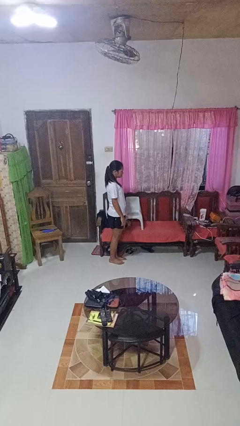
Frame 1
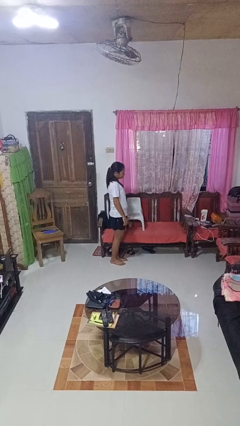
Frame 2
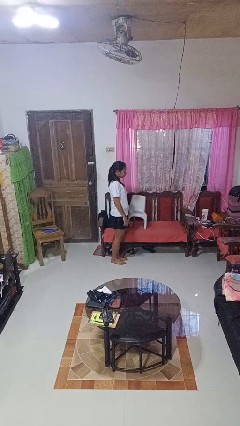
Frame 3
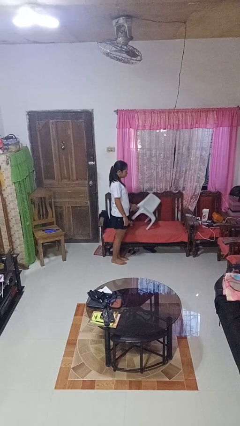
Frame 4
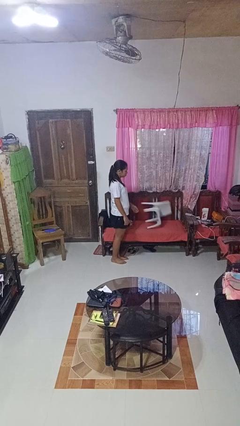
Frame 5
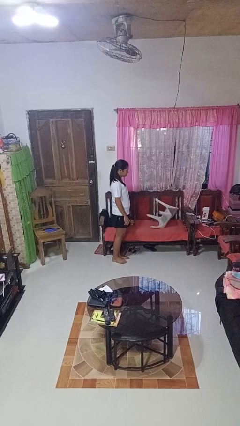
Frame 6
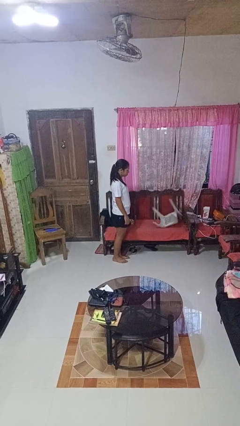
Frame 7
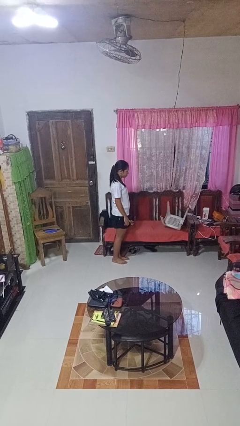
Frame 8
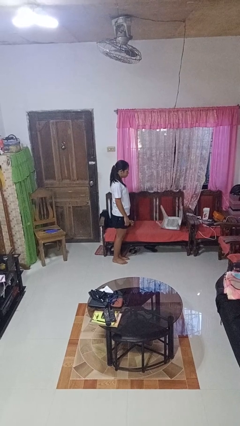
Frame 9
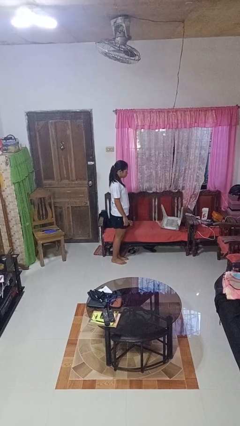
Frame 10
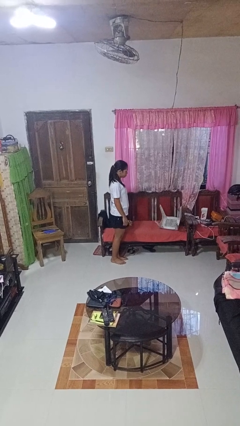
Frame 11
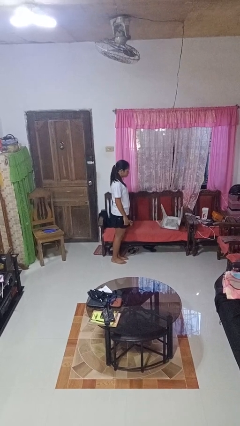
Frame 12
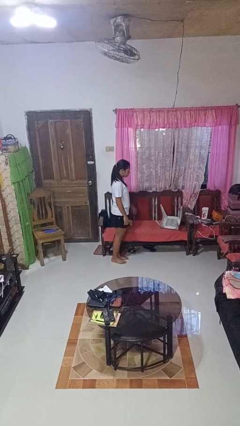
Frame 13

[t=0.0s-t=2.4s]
person knocks over furniture

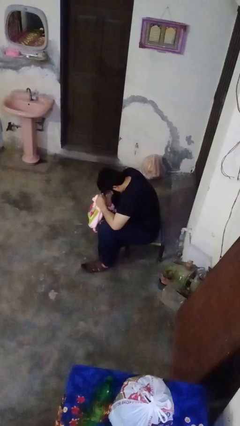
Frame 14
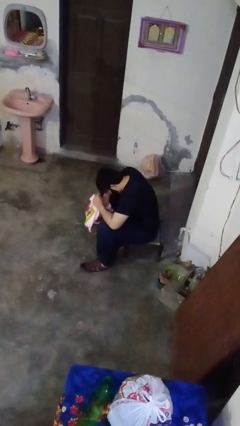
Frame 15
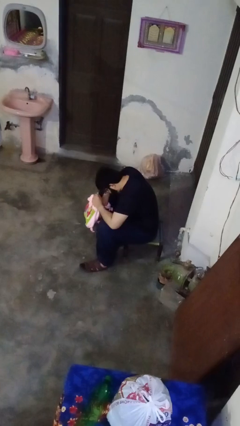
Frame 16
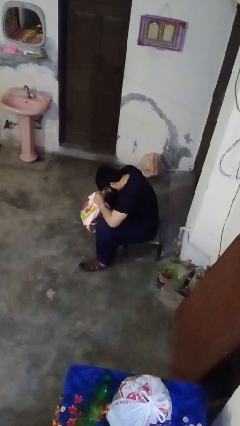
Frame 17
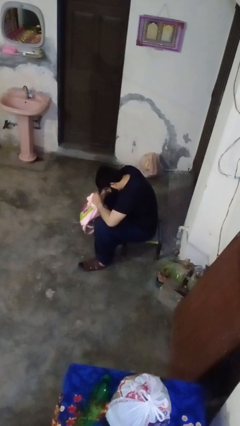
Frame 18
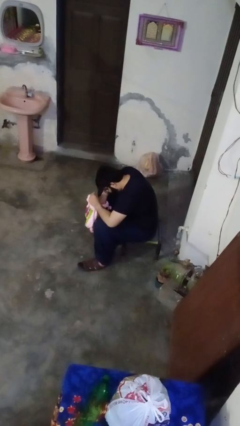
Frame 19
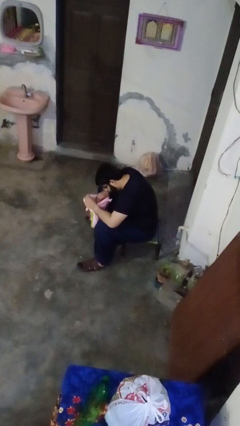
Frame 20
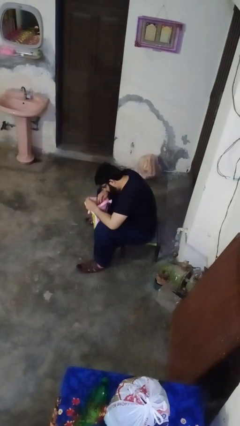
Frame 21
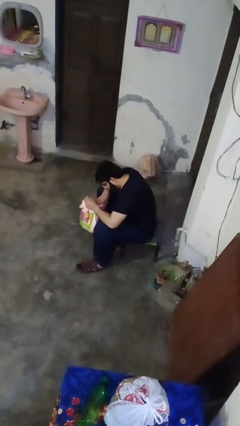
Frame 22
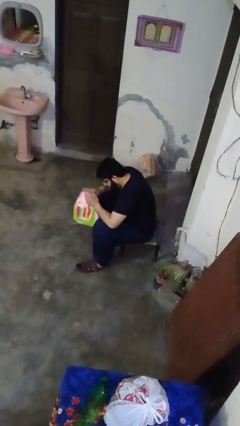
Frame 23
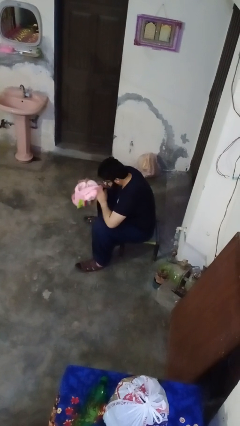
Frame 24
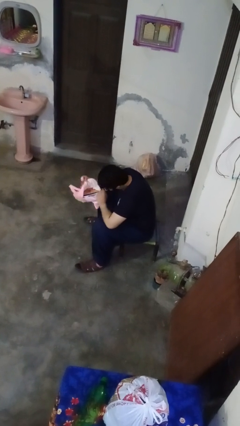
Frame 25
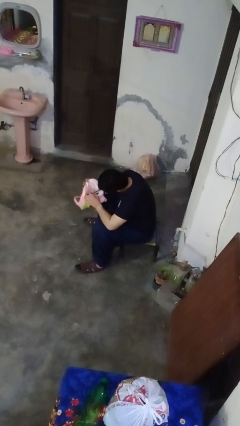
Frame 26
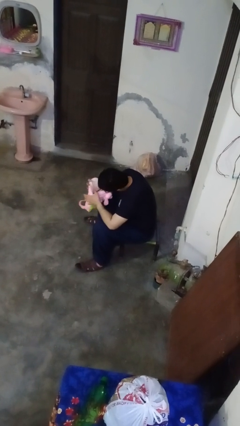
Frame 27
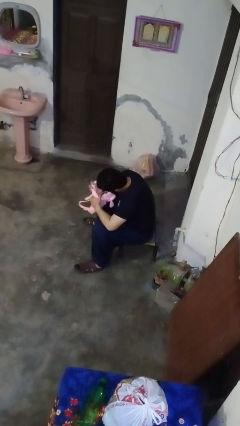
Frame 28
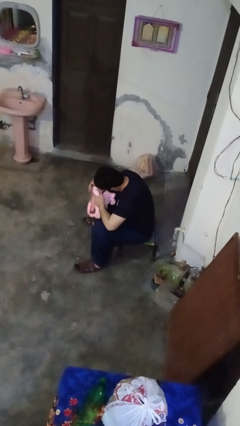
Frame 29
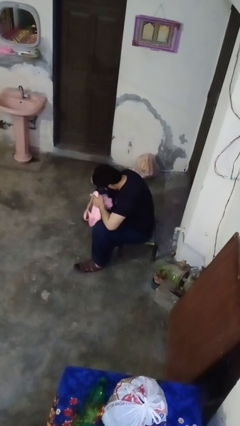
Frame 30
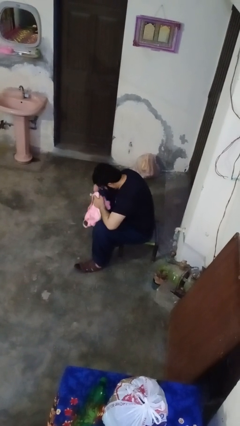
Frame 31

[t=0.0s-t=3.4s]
person searches in bag

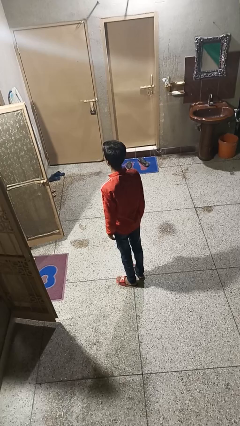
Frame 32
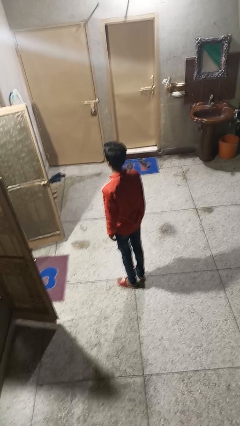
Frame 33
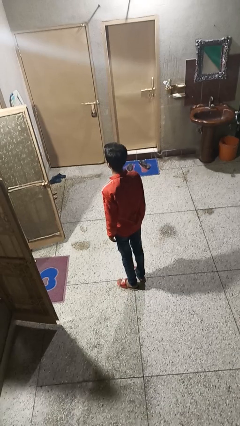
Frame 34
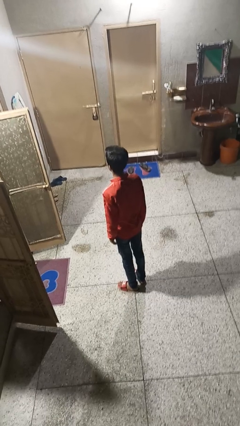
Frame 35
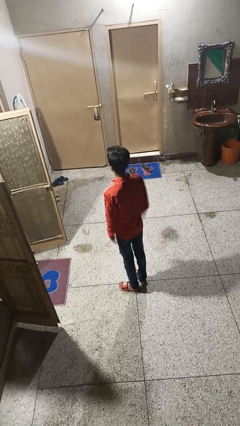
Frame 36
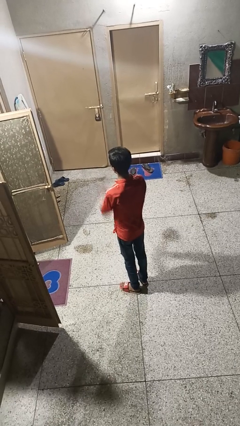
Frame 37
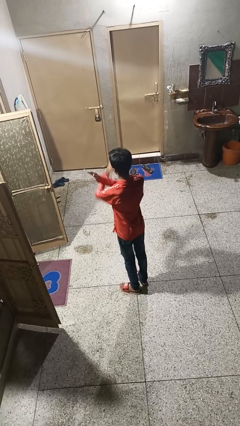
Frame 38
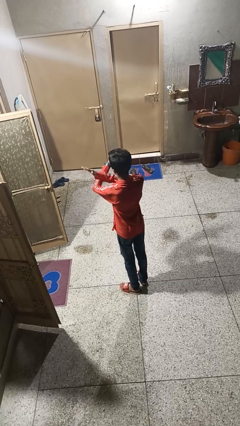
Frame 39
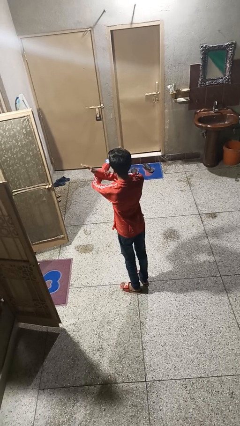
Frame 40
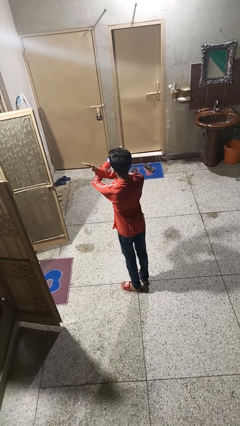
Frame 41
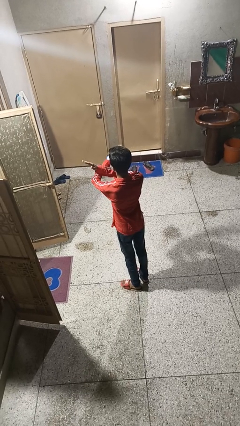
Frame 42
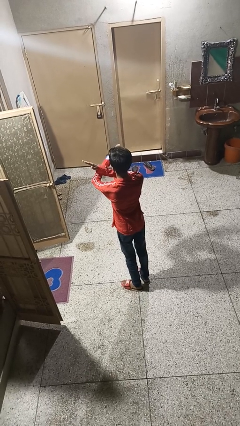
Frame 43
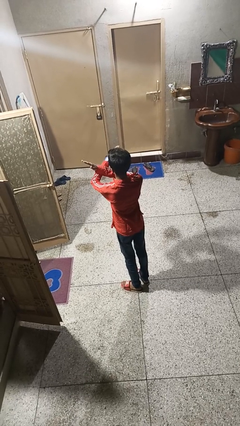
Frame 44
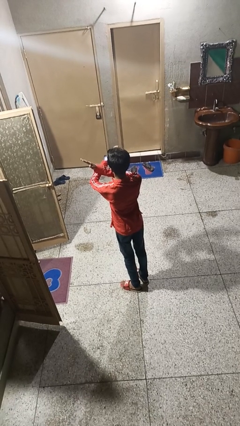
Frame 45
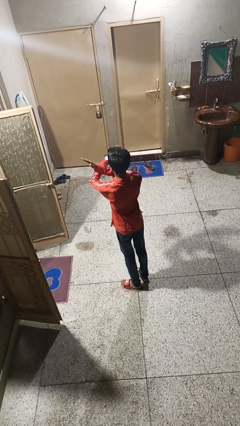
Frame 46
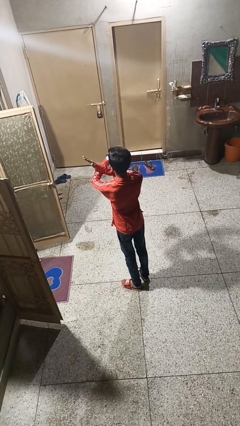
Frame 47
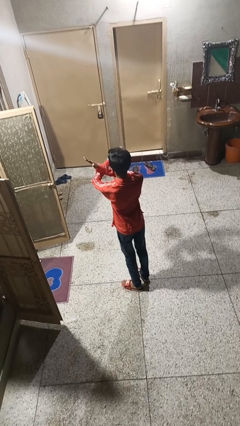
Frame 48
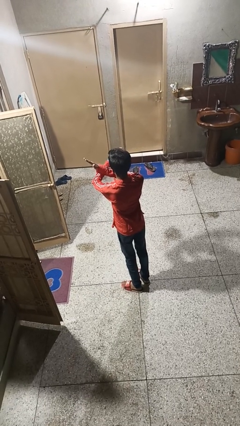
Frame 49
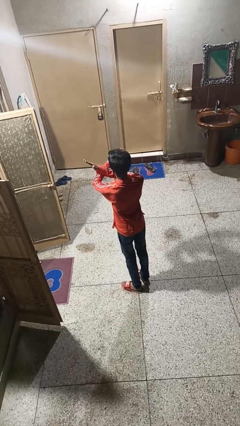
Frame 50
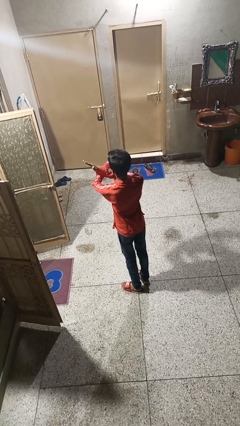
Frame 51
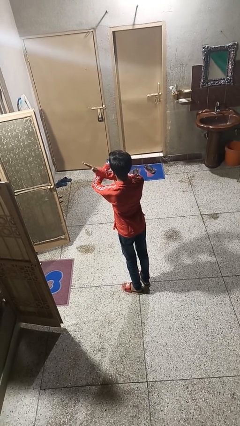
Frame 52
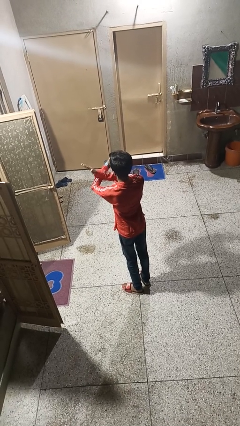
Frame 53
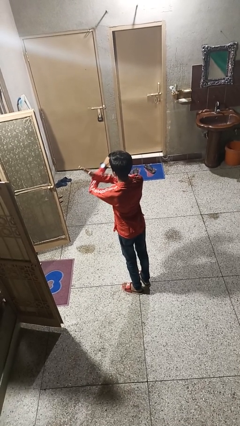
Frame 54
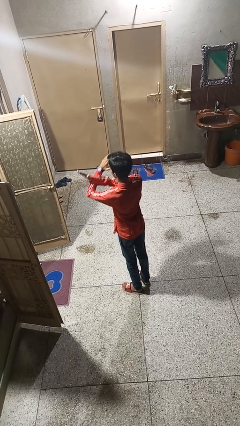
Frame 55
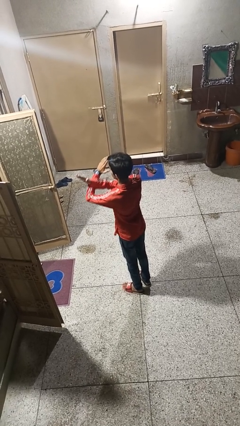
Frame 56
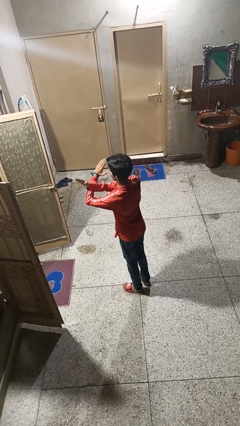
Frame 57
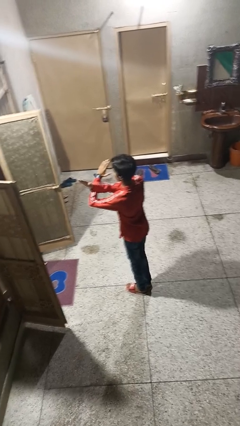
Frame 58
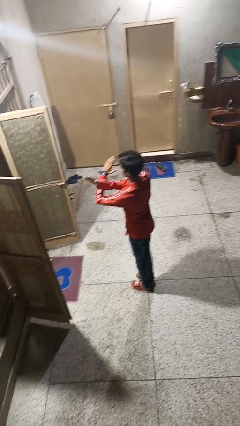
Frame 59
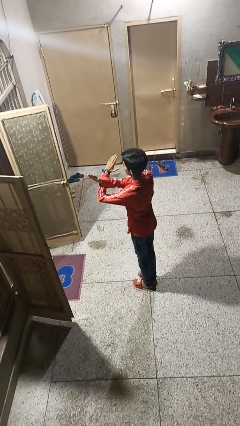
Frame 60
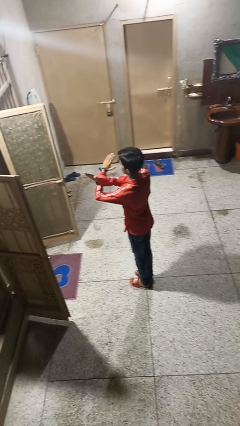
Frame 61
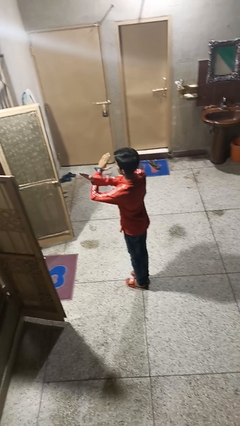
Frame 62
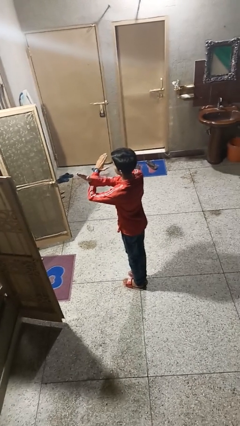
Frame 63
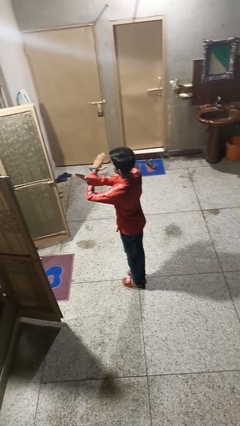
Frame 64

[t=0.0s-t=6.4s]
person gestures arms x

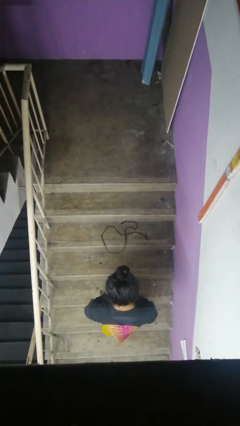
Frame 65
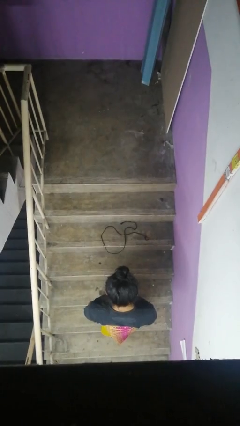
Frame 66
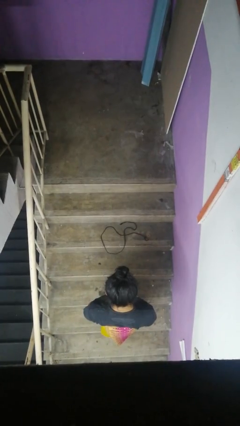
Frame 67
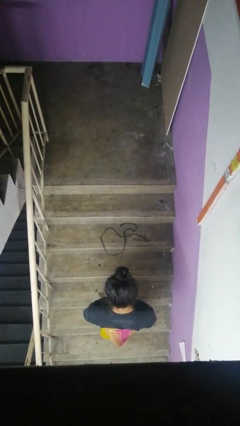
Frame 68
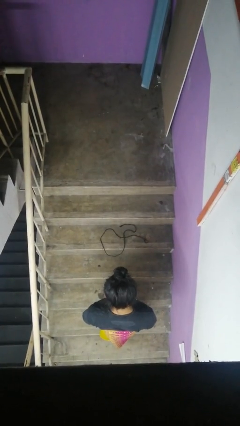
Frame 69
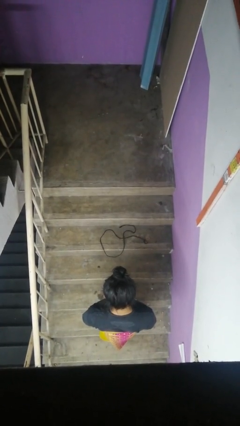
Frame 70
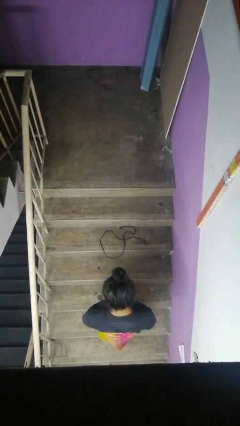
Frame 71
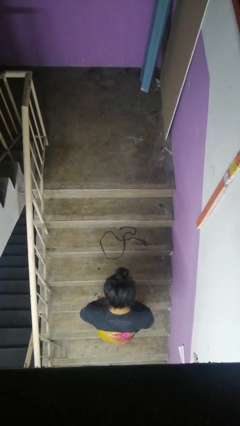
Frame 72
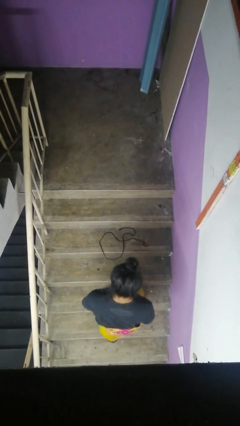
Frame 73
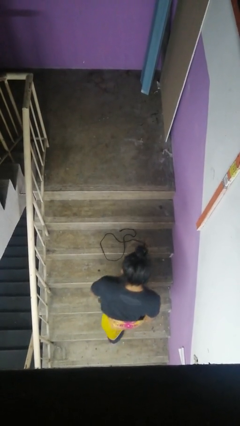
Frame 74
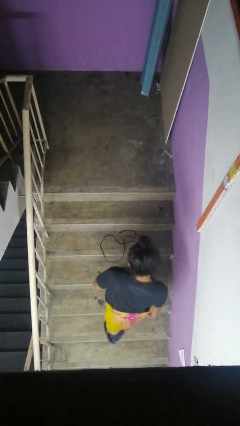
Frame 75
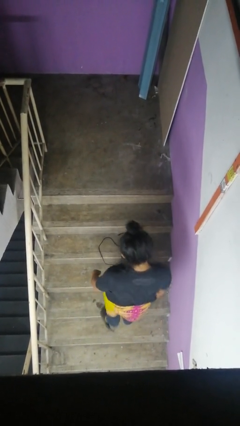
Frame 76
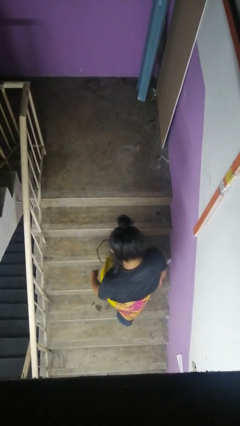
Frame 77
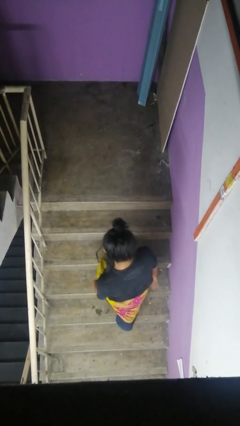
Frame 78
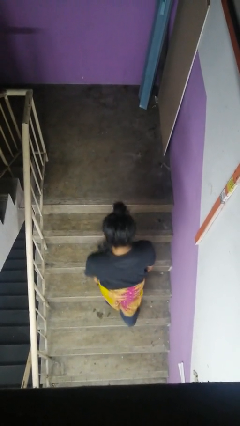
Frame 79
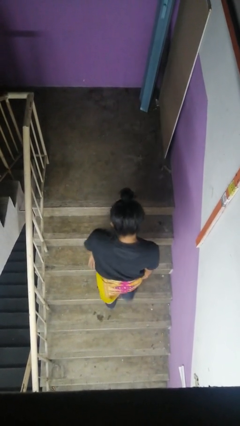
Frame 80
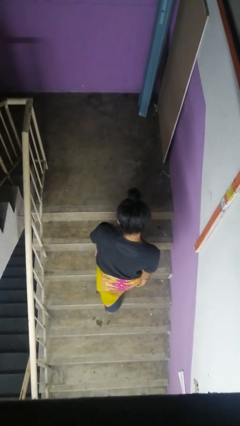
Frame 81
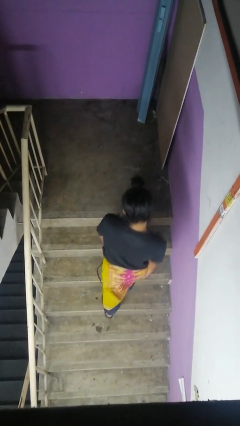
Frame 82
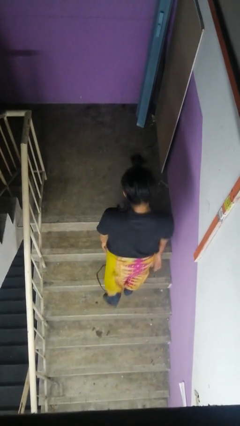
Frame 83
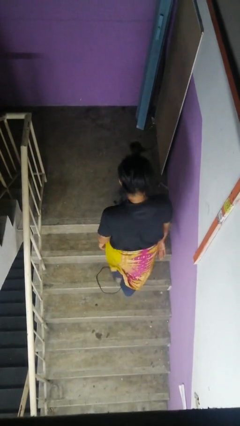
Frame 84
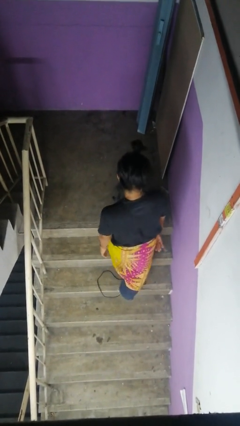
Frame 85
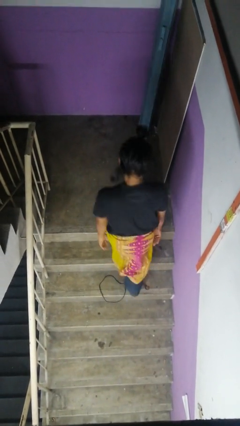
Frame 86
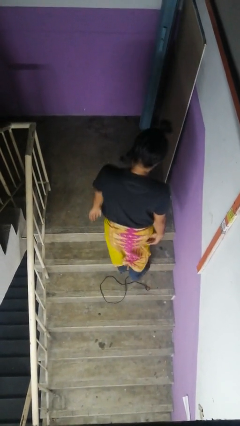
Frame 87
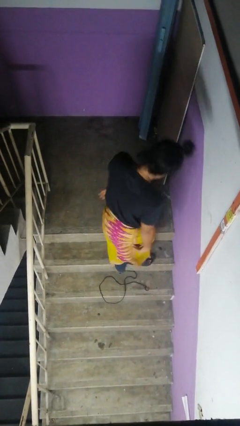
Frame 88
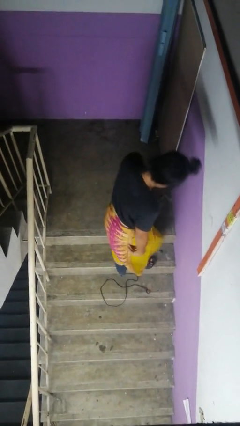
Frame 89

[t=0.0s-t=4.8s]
person climbs up stairs

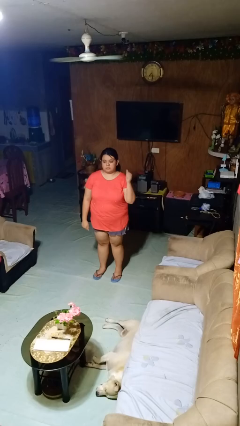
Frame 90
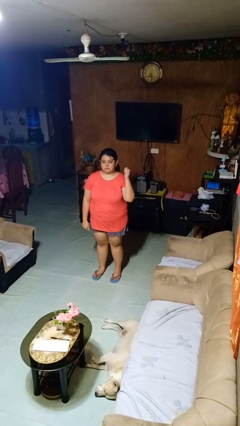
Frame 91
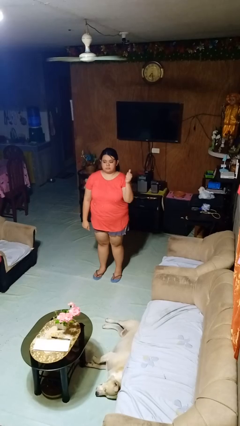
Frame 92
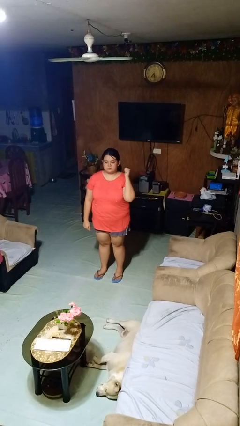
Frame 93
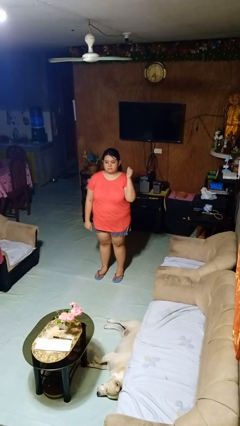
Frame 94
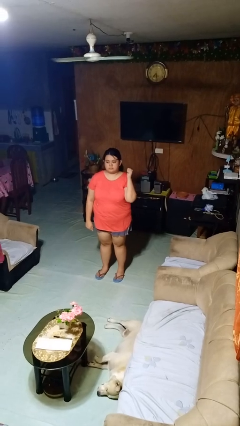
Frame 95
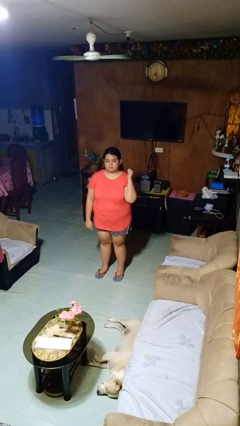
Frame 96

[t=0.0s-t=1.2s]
person gestures behind me
